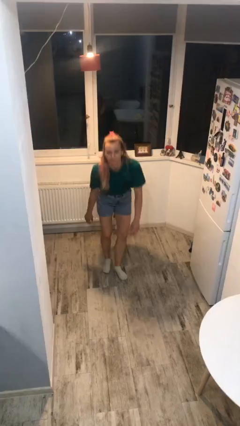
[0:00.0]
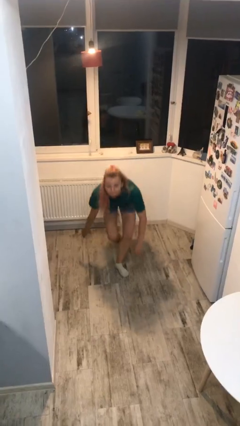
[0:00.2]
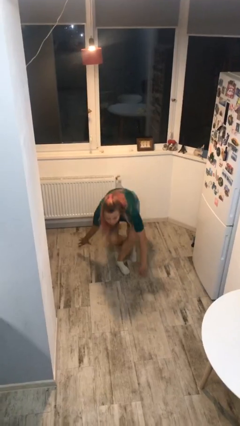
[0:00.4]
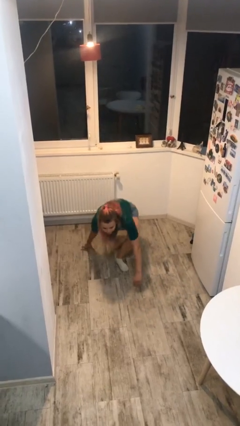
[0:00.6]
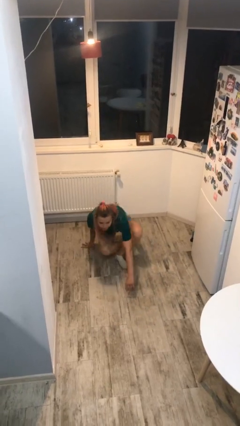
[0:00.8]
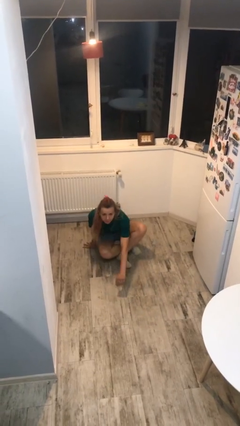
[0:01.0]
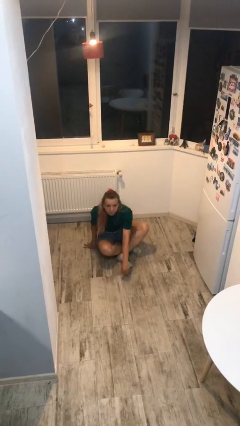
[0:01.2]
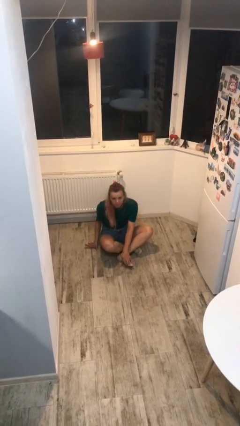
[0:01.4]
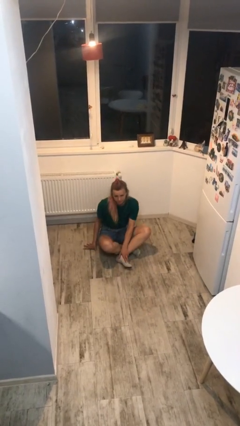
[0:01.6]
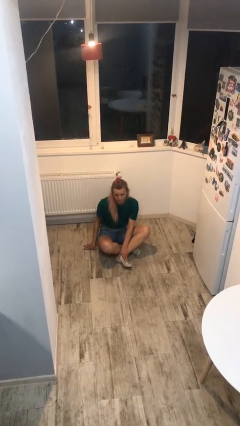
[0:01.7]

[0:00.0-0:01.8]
person sits crisscross

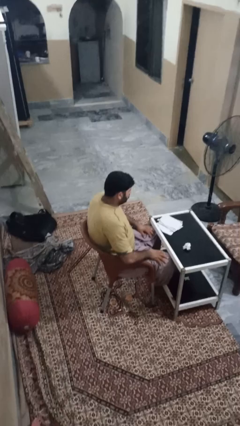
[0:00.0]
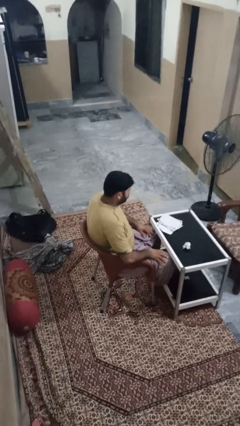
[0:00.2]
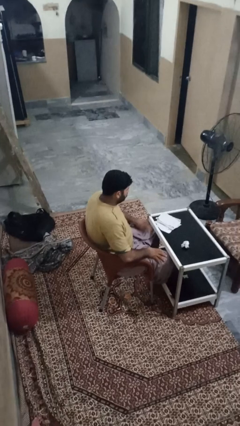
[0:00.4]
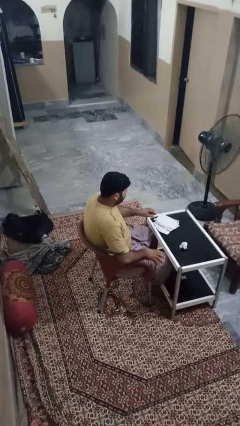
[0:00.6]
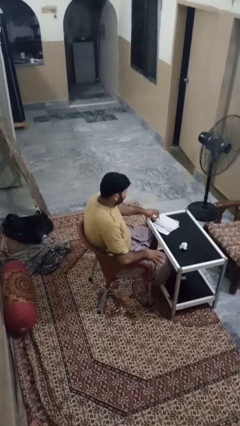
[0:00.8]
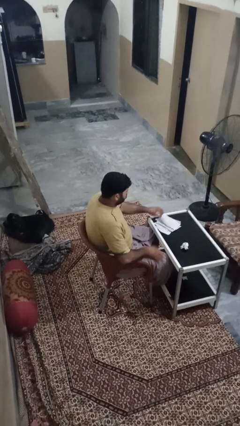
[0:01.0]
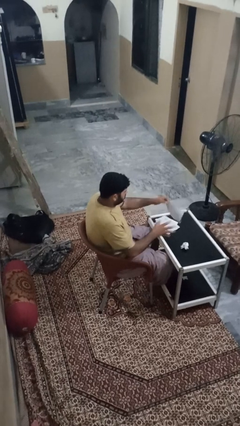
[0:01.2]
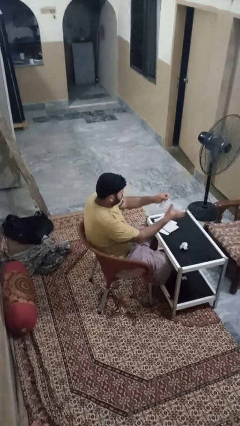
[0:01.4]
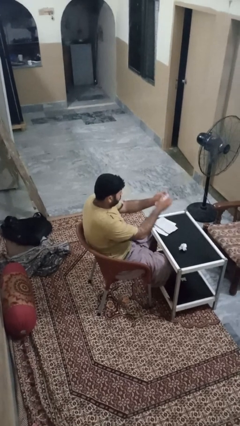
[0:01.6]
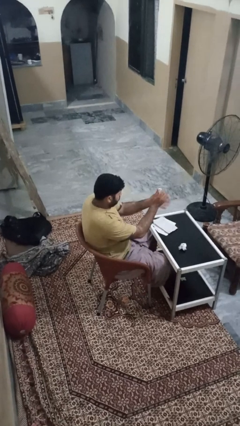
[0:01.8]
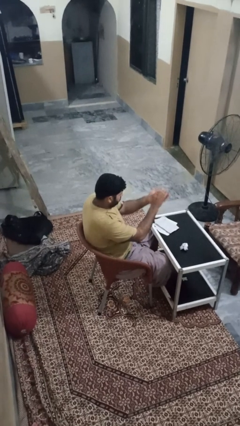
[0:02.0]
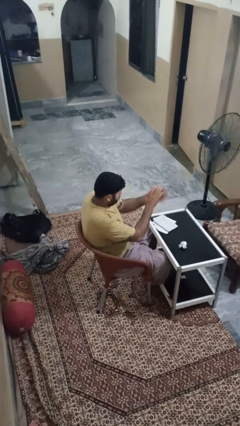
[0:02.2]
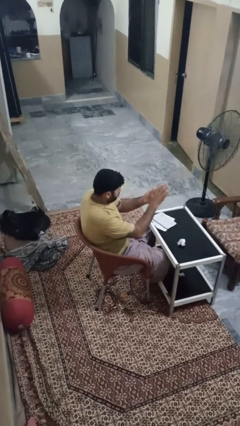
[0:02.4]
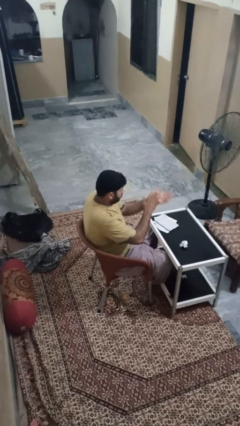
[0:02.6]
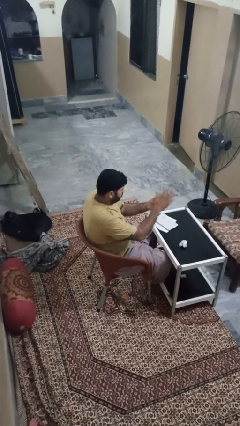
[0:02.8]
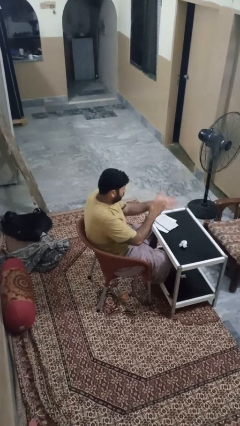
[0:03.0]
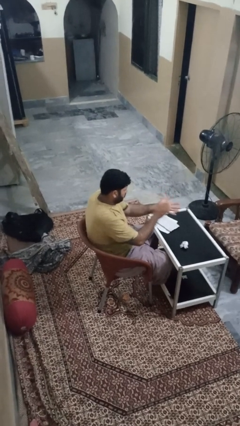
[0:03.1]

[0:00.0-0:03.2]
person crumples paper

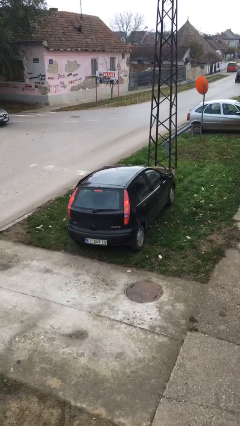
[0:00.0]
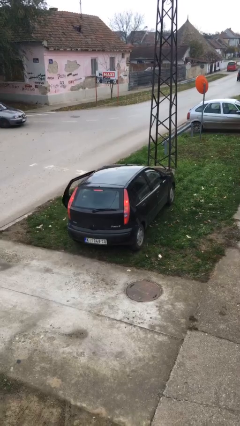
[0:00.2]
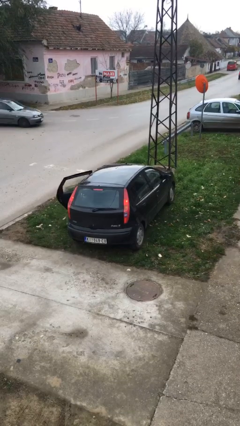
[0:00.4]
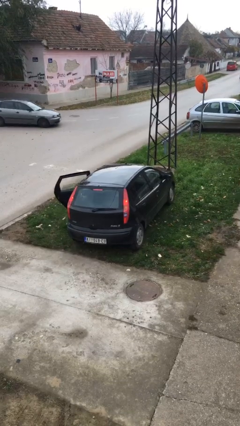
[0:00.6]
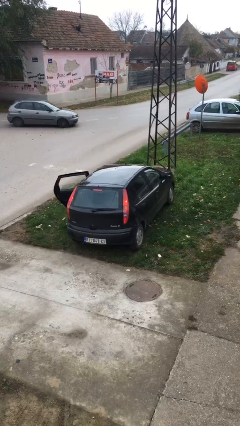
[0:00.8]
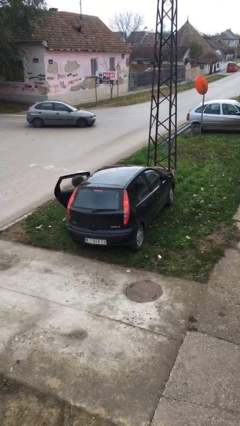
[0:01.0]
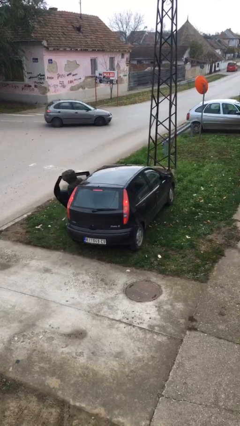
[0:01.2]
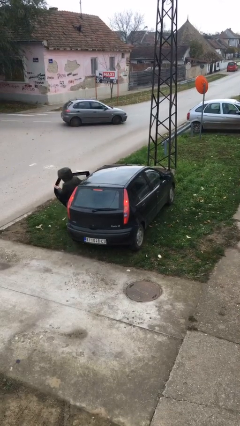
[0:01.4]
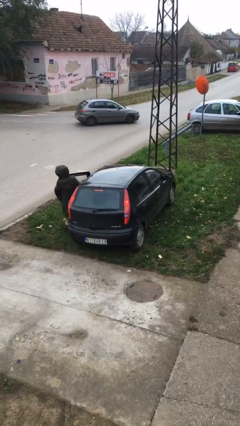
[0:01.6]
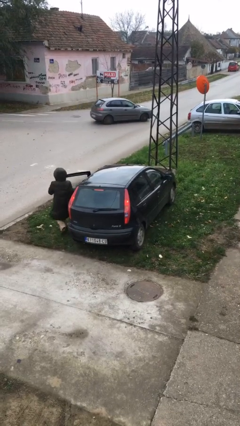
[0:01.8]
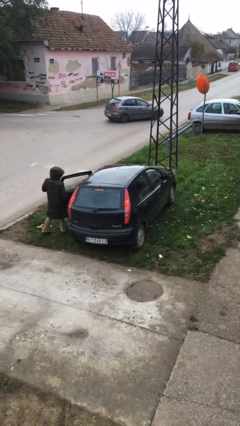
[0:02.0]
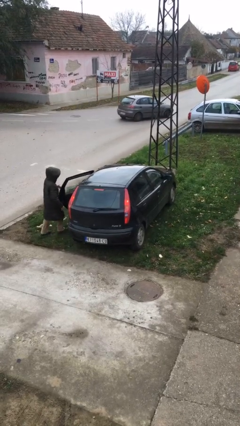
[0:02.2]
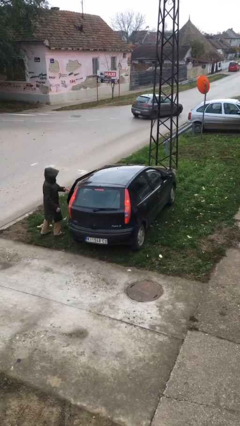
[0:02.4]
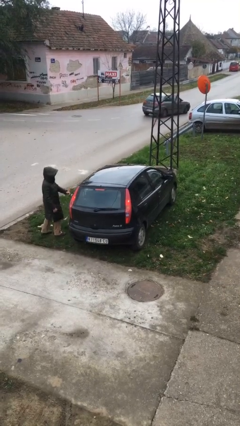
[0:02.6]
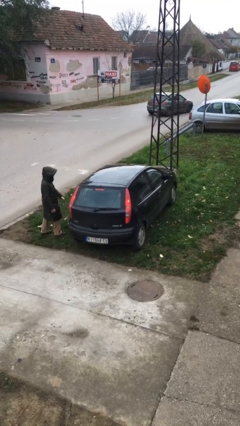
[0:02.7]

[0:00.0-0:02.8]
car drops off person

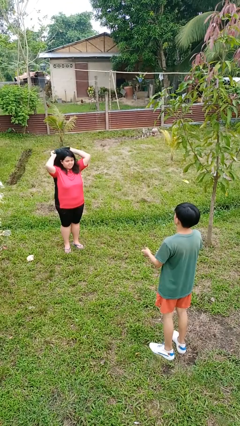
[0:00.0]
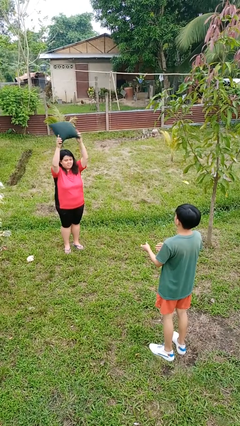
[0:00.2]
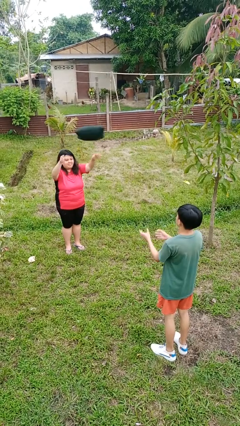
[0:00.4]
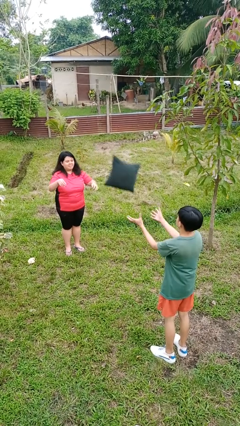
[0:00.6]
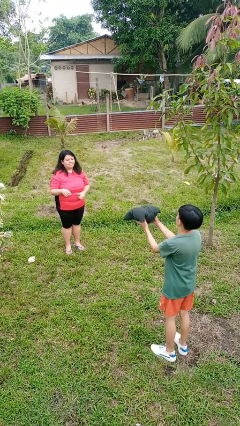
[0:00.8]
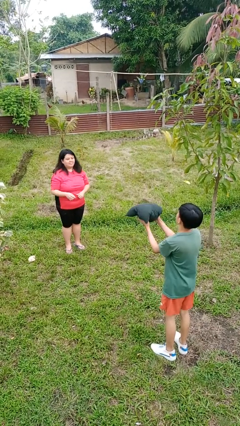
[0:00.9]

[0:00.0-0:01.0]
person throws object to person

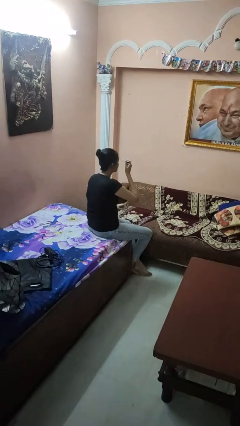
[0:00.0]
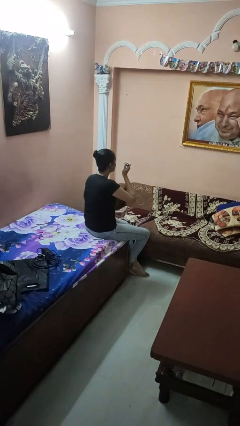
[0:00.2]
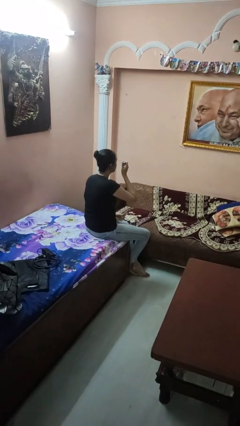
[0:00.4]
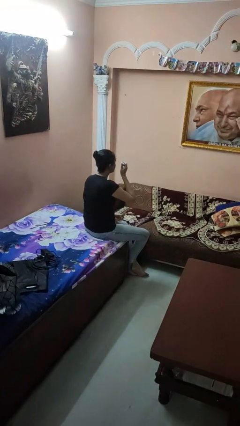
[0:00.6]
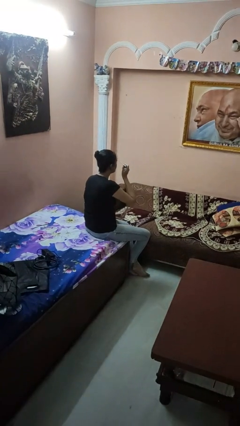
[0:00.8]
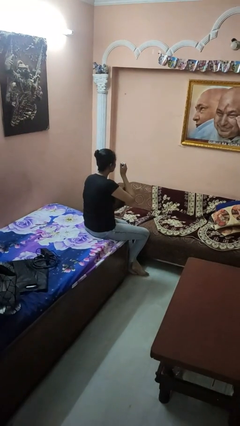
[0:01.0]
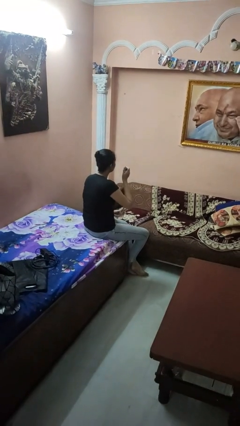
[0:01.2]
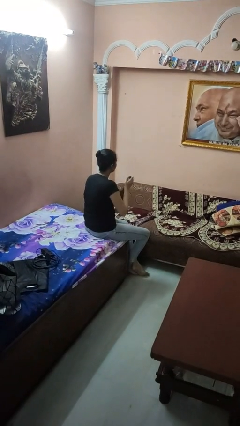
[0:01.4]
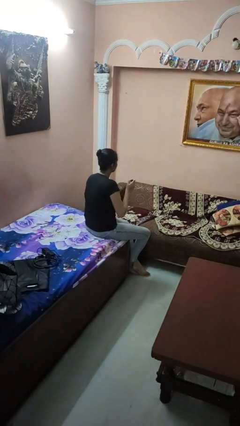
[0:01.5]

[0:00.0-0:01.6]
person applies eye makeup

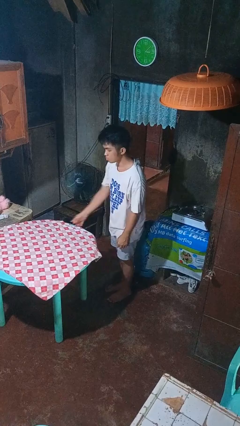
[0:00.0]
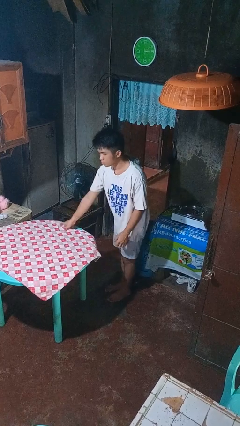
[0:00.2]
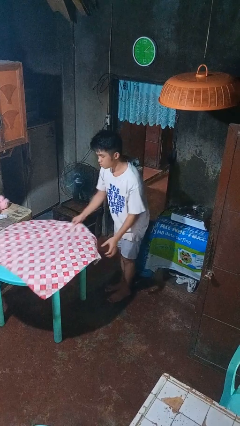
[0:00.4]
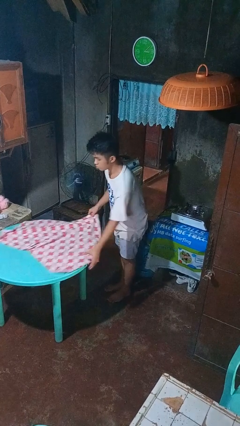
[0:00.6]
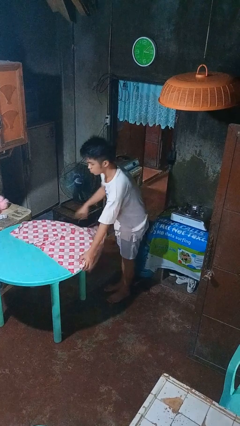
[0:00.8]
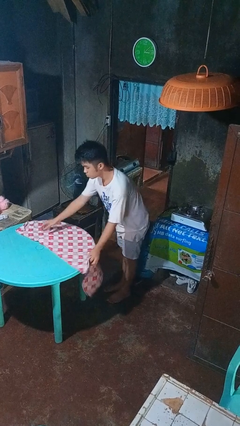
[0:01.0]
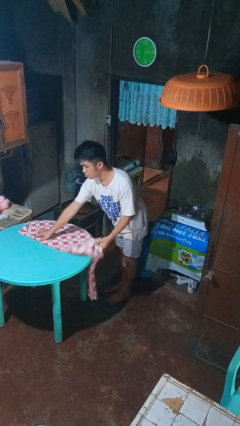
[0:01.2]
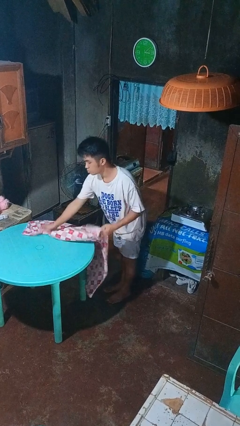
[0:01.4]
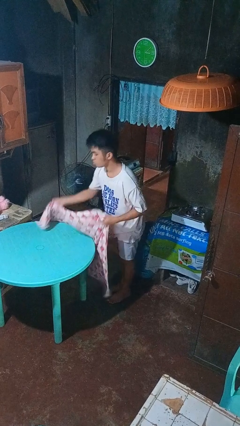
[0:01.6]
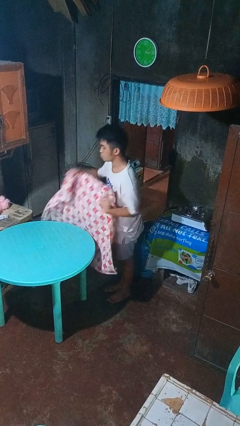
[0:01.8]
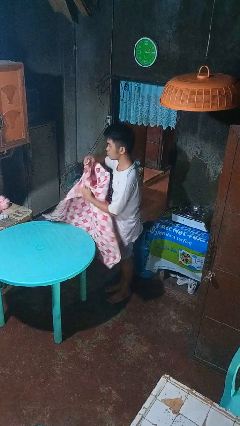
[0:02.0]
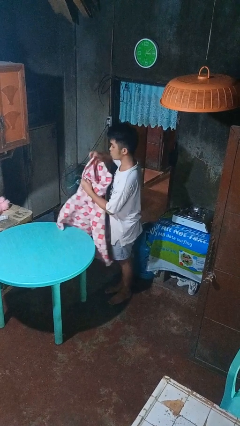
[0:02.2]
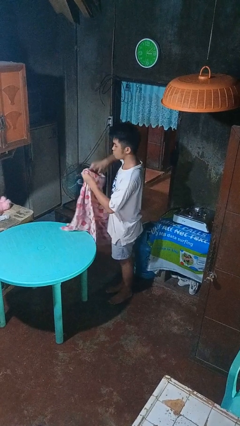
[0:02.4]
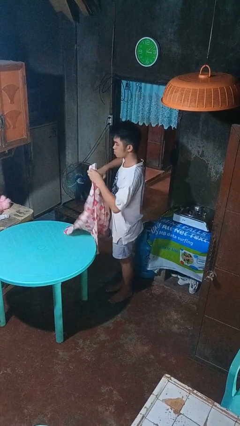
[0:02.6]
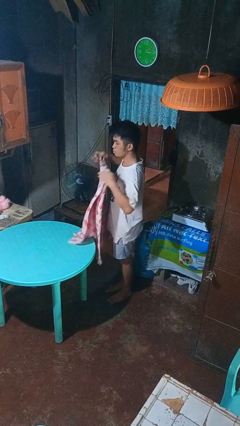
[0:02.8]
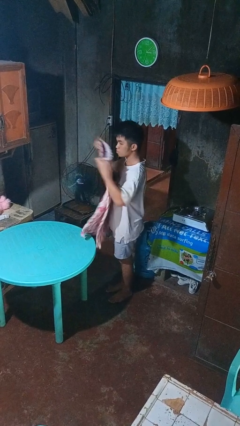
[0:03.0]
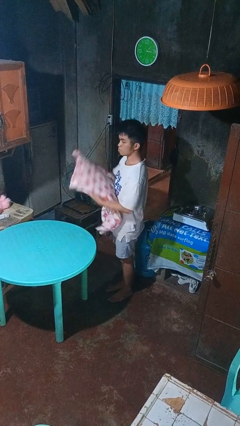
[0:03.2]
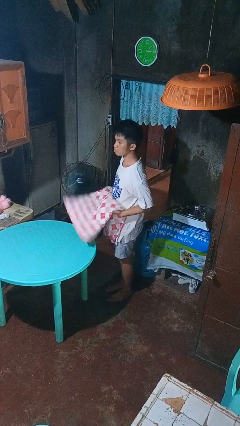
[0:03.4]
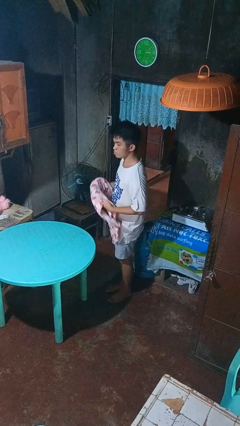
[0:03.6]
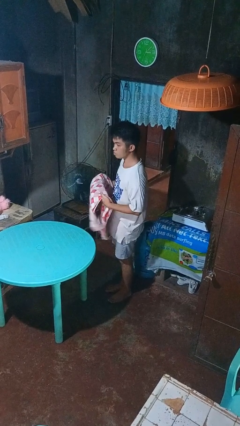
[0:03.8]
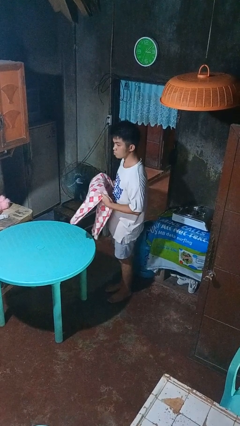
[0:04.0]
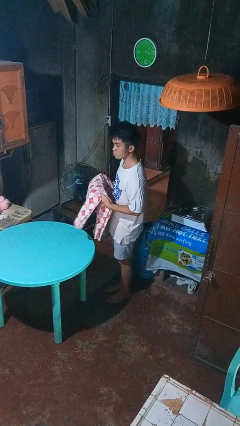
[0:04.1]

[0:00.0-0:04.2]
person folds tablecloth

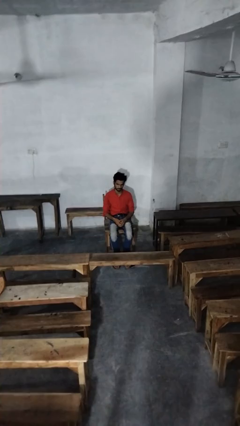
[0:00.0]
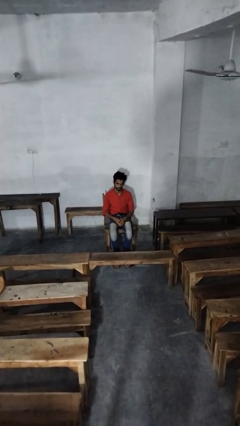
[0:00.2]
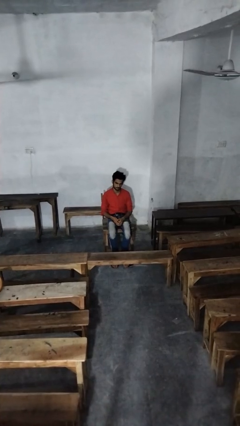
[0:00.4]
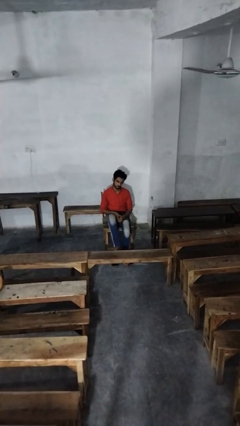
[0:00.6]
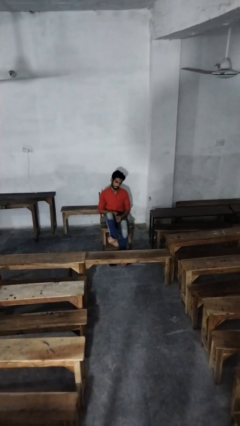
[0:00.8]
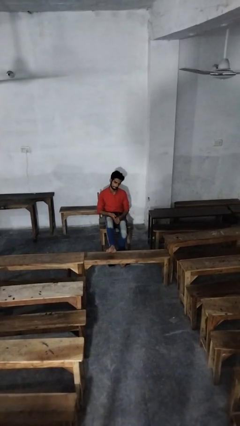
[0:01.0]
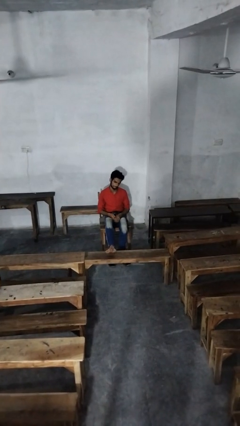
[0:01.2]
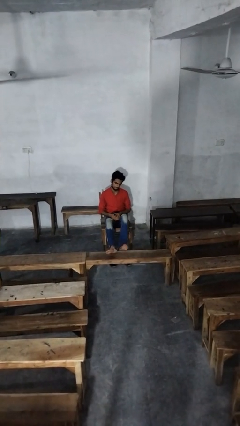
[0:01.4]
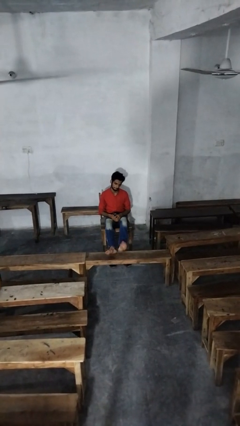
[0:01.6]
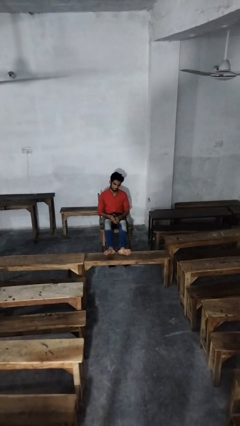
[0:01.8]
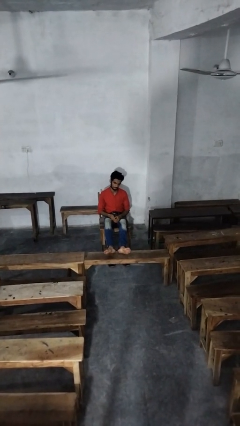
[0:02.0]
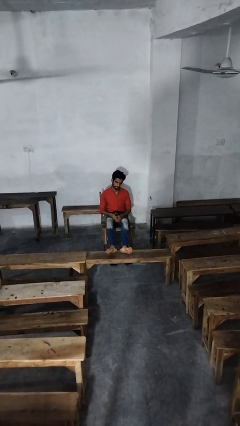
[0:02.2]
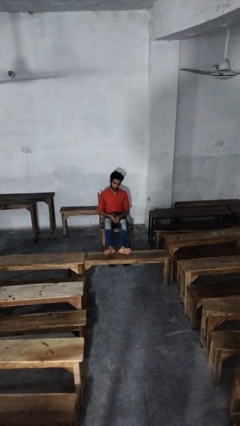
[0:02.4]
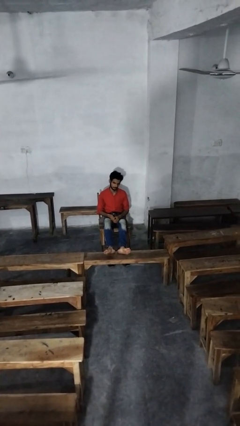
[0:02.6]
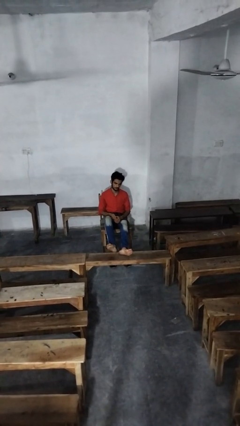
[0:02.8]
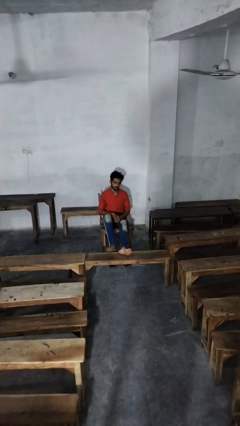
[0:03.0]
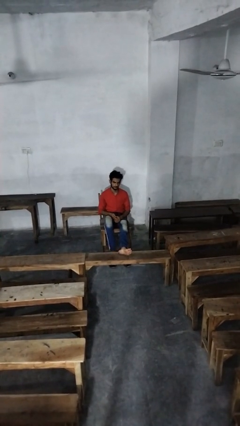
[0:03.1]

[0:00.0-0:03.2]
person puts feet up
